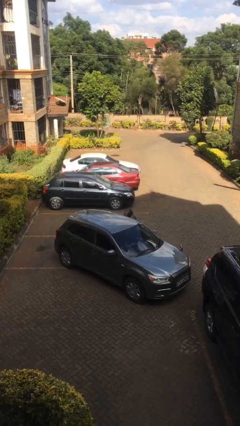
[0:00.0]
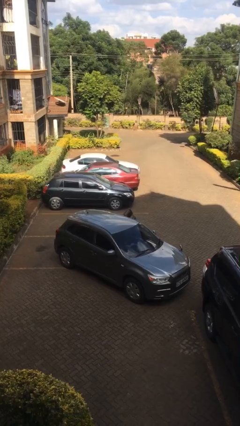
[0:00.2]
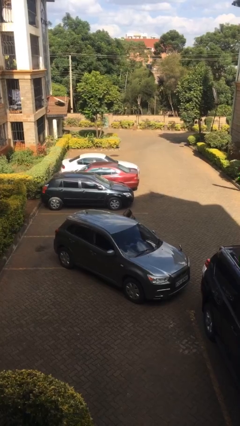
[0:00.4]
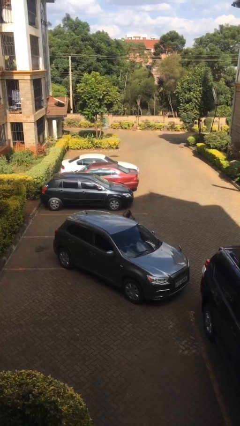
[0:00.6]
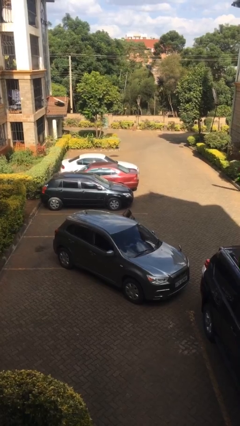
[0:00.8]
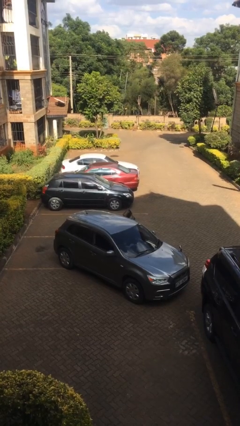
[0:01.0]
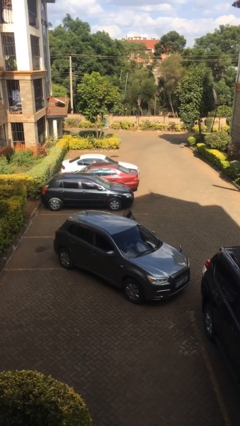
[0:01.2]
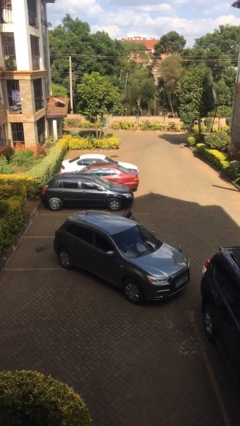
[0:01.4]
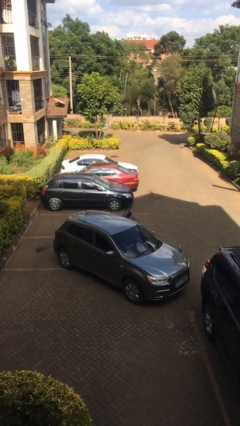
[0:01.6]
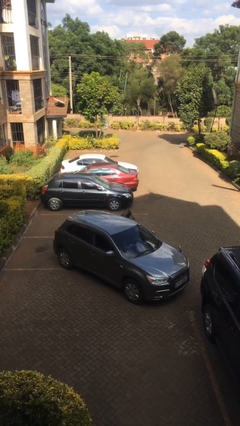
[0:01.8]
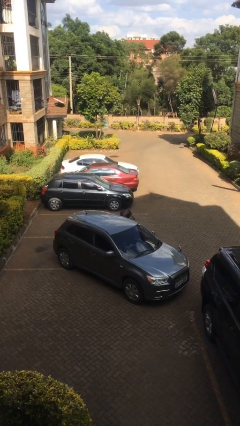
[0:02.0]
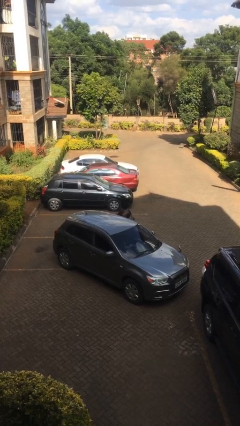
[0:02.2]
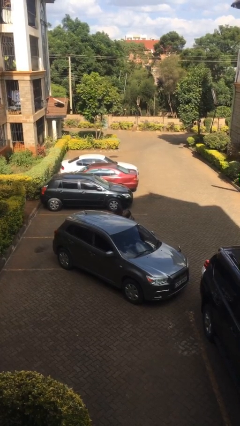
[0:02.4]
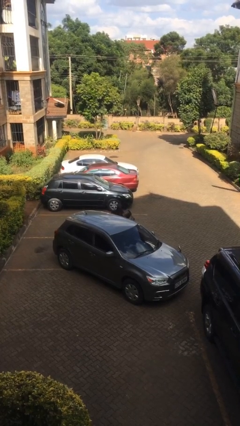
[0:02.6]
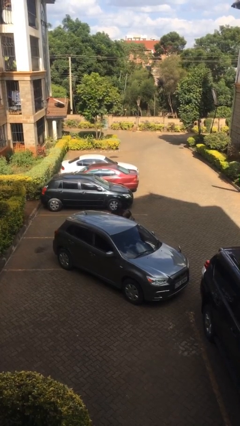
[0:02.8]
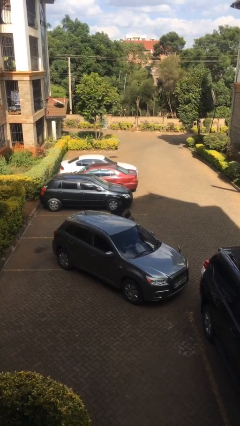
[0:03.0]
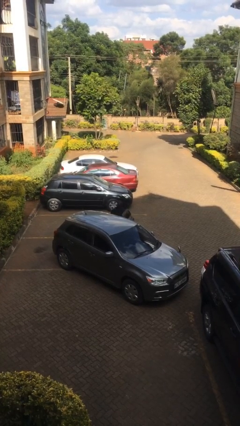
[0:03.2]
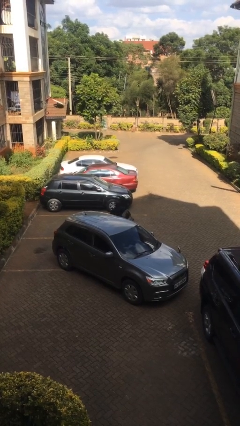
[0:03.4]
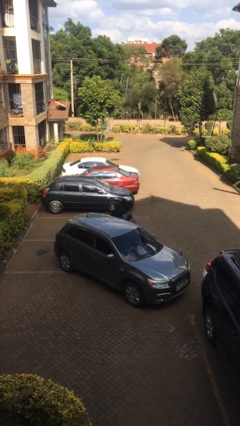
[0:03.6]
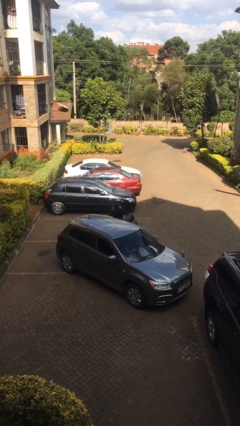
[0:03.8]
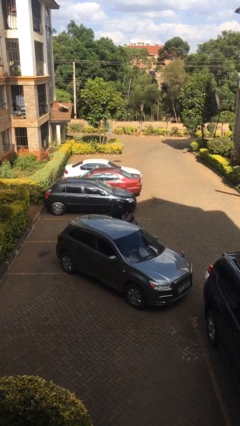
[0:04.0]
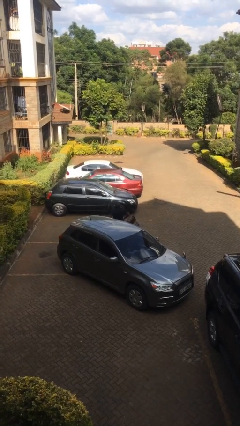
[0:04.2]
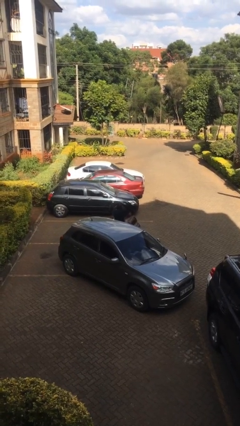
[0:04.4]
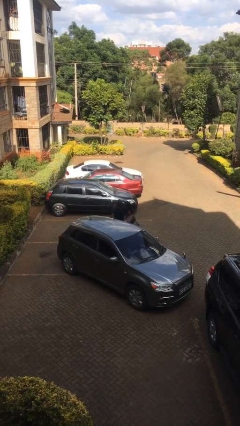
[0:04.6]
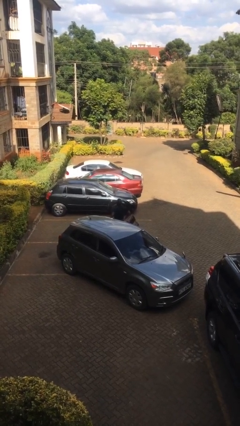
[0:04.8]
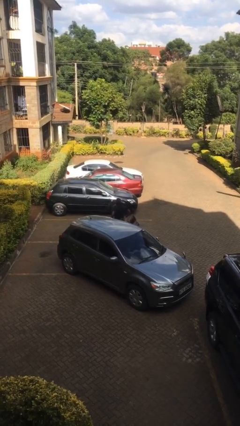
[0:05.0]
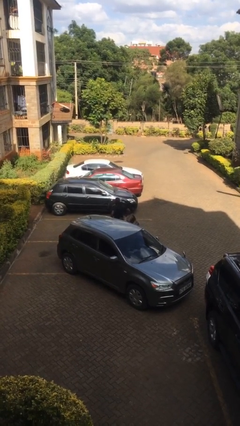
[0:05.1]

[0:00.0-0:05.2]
person exits car

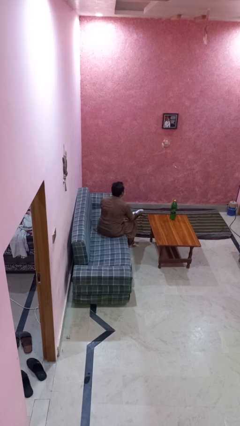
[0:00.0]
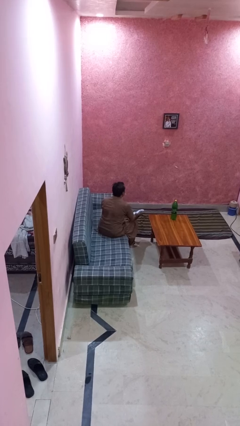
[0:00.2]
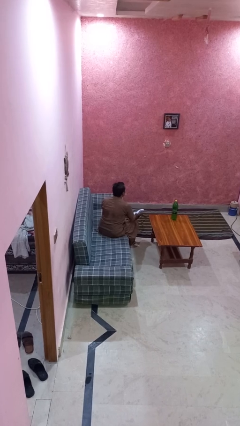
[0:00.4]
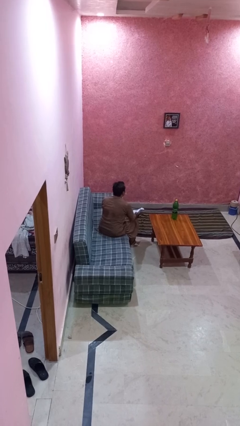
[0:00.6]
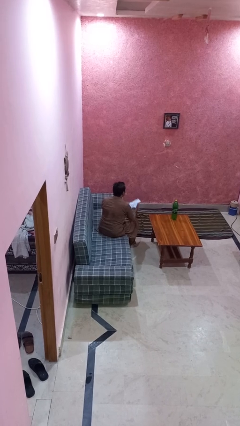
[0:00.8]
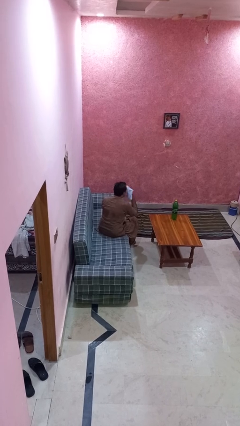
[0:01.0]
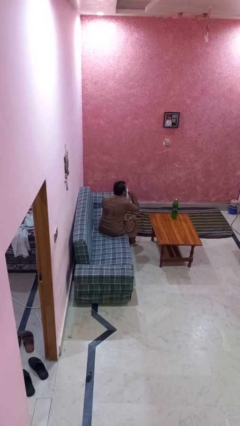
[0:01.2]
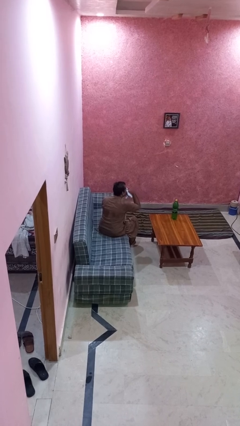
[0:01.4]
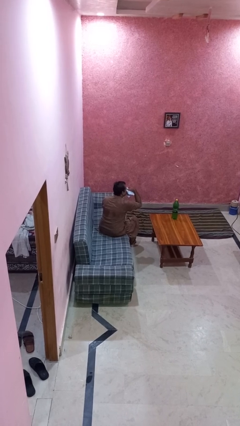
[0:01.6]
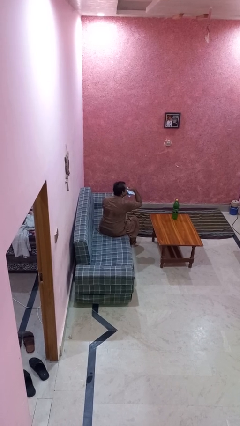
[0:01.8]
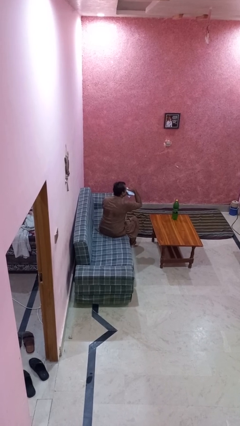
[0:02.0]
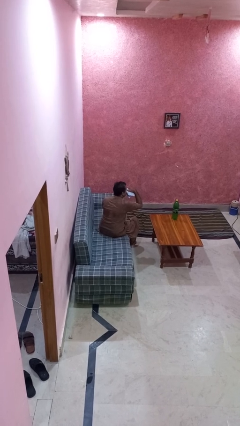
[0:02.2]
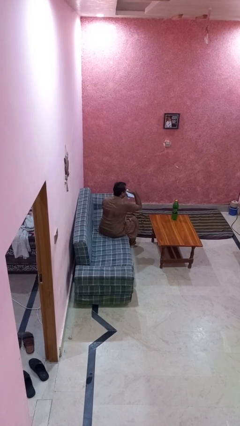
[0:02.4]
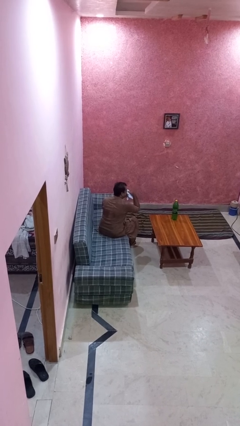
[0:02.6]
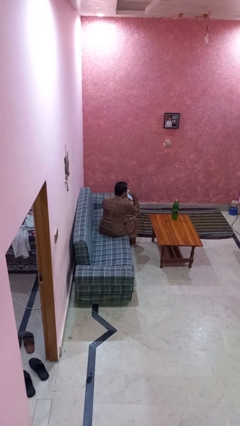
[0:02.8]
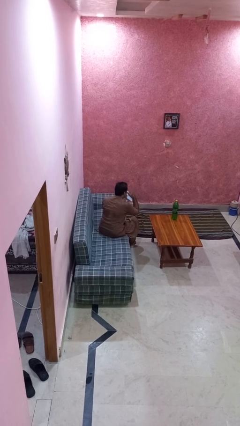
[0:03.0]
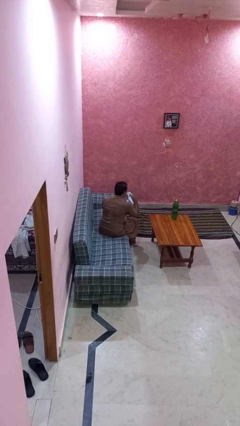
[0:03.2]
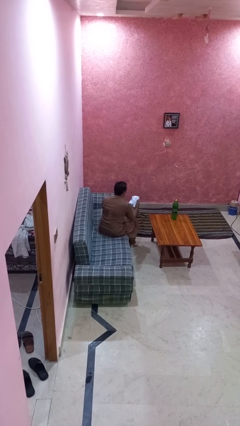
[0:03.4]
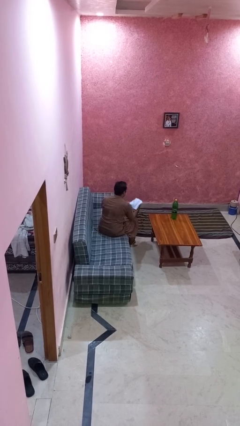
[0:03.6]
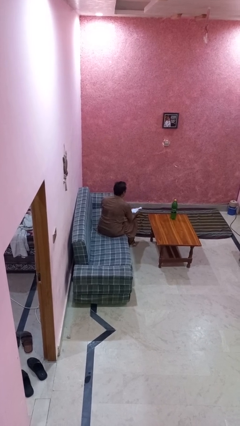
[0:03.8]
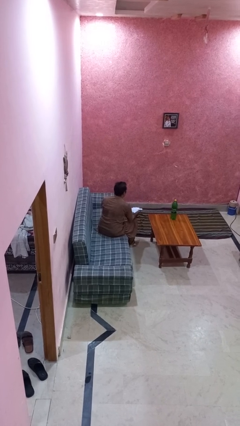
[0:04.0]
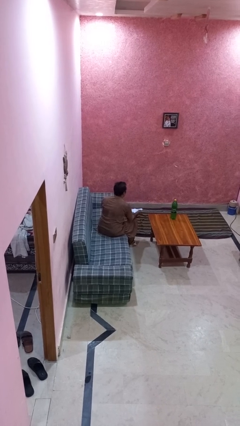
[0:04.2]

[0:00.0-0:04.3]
person blows nose

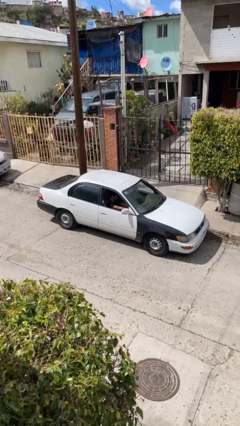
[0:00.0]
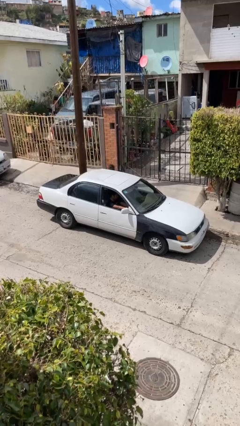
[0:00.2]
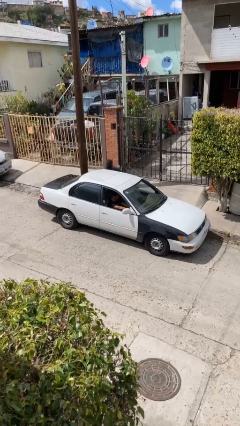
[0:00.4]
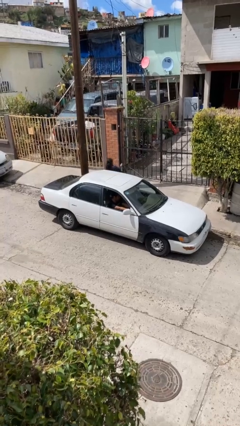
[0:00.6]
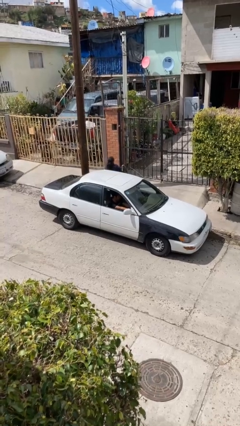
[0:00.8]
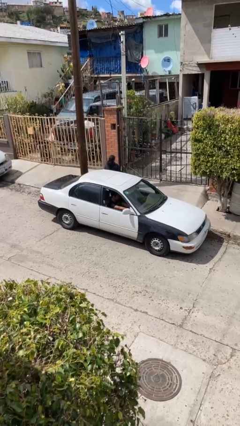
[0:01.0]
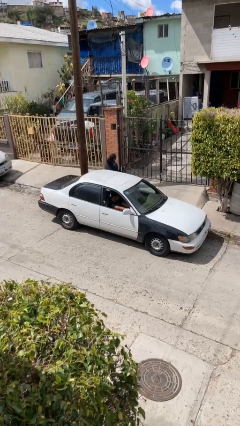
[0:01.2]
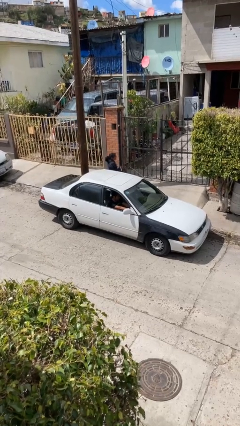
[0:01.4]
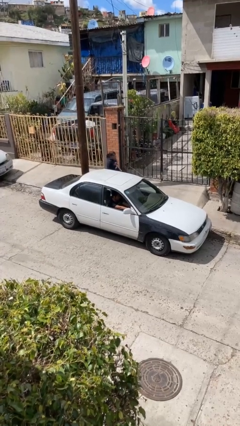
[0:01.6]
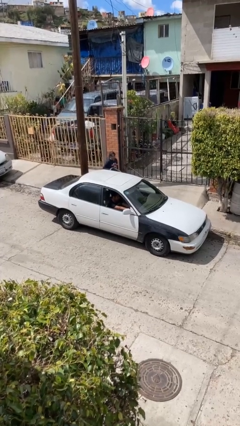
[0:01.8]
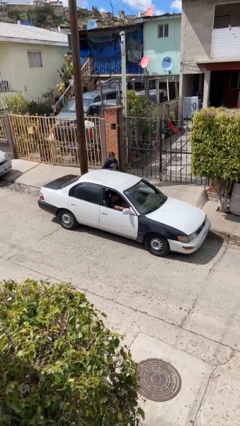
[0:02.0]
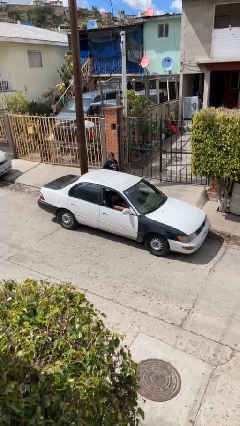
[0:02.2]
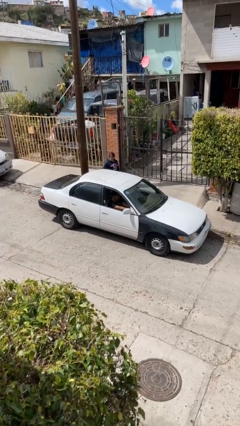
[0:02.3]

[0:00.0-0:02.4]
car drops off person

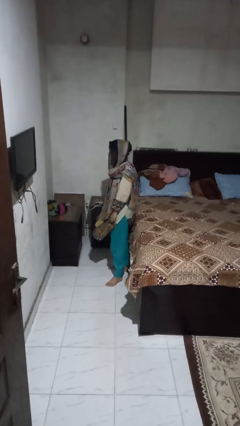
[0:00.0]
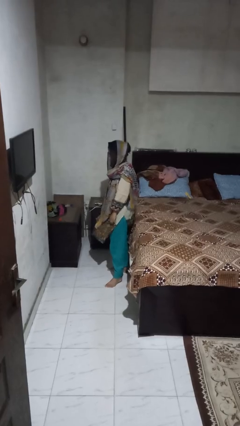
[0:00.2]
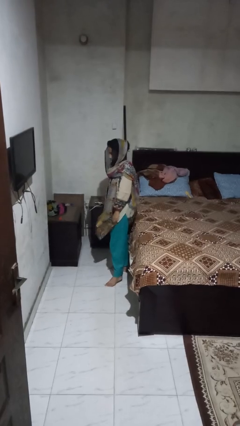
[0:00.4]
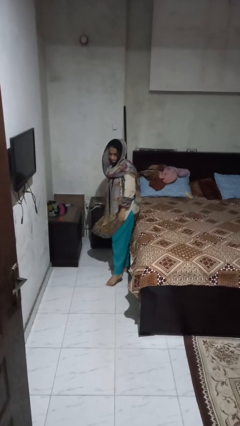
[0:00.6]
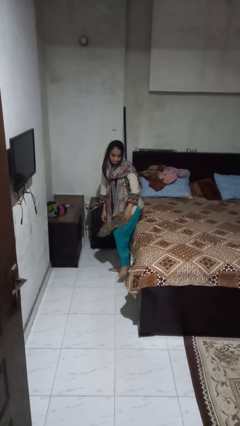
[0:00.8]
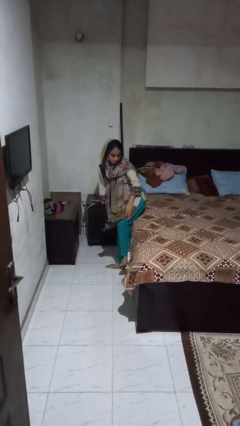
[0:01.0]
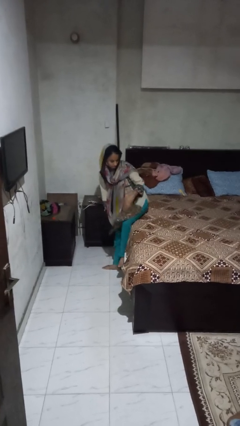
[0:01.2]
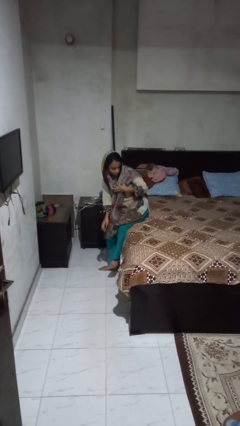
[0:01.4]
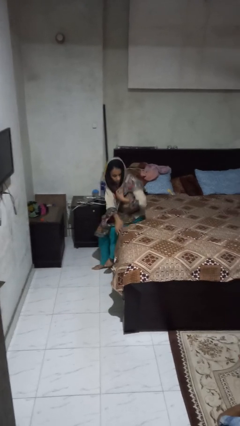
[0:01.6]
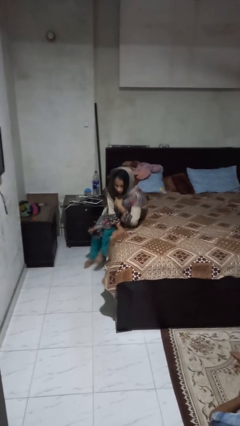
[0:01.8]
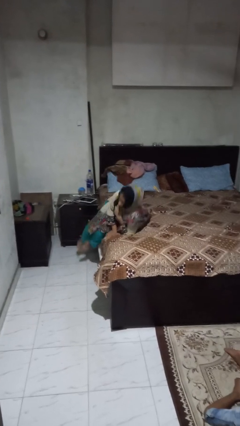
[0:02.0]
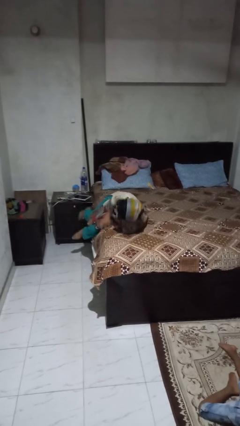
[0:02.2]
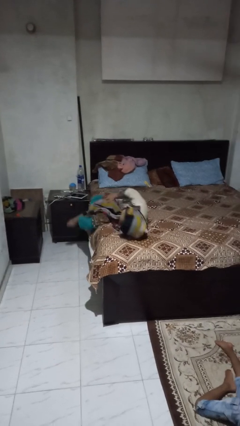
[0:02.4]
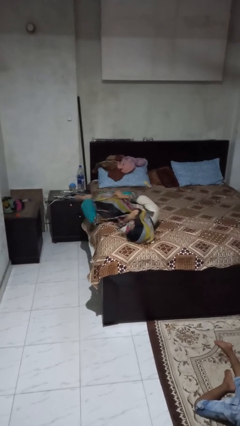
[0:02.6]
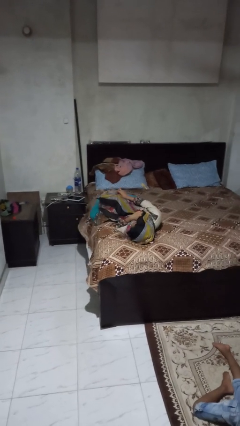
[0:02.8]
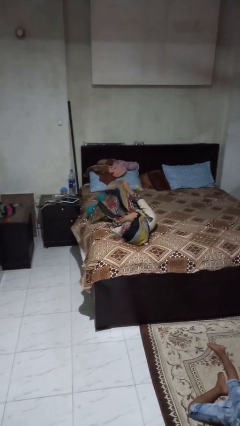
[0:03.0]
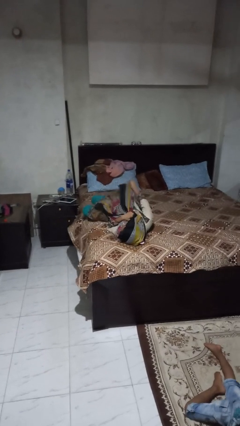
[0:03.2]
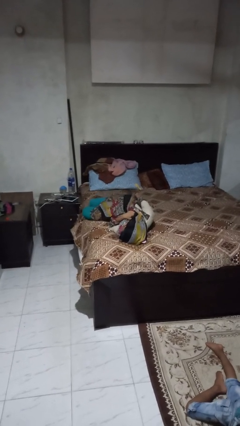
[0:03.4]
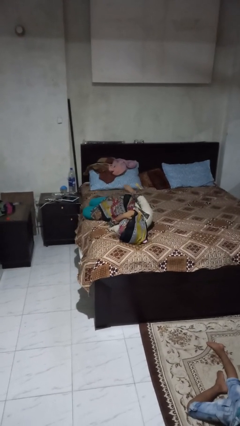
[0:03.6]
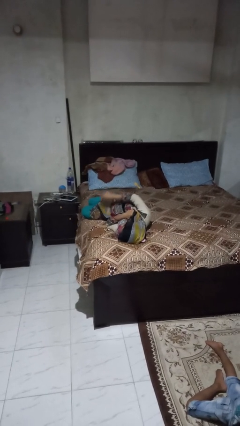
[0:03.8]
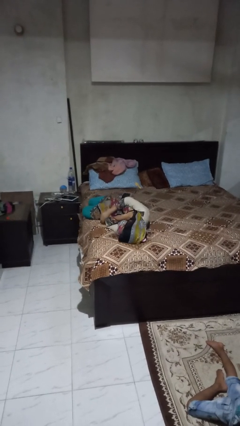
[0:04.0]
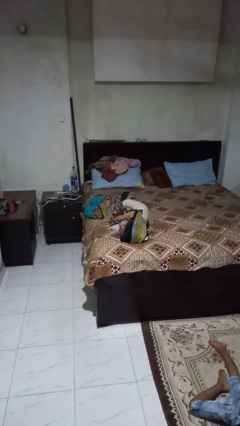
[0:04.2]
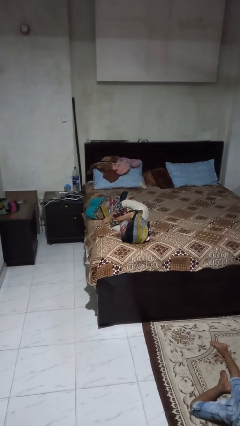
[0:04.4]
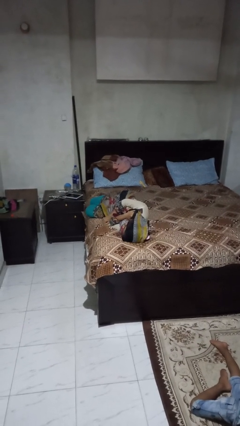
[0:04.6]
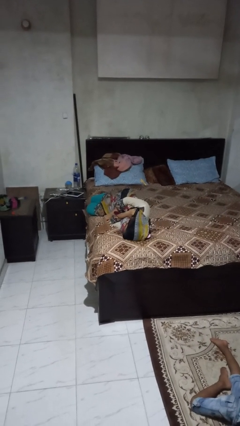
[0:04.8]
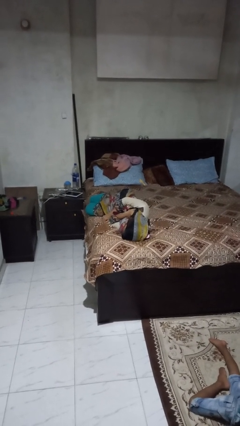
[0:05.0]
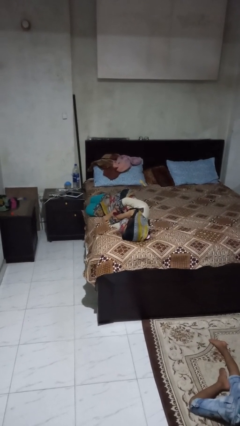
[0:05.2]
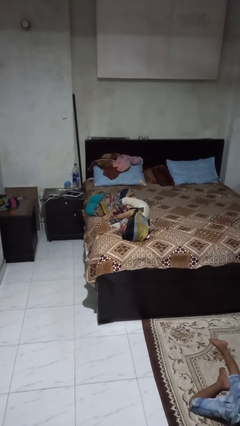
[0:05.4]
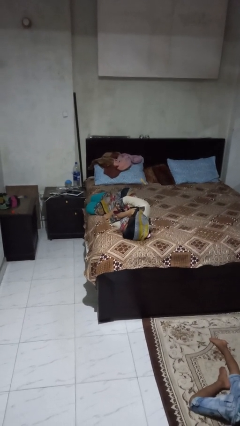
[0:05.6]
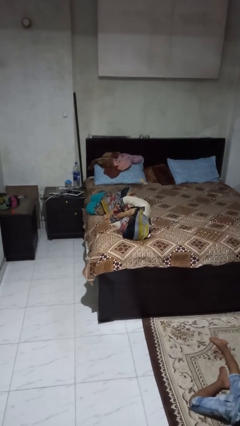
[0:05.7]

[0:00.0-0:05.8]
person lies down on bed
